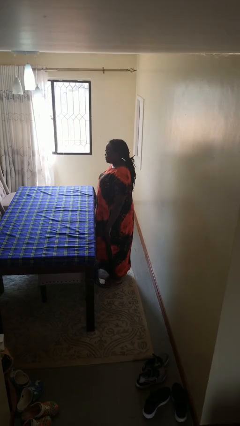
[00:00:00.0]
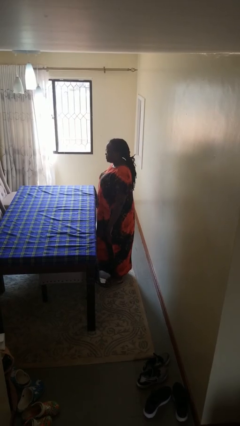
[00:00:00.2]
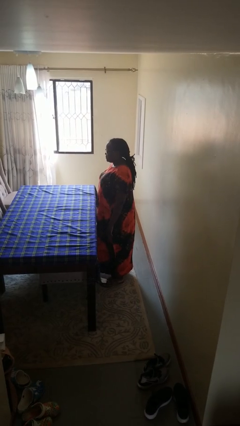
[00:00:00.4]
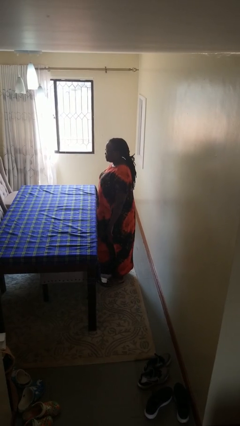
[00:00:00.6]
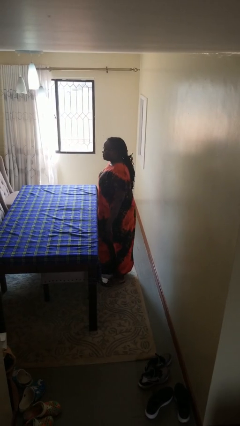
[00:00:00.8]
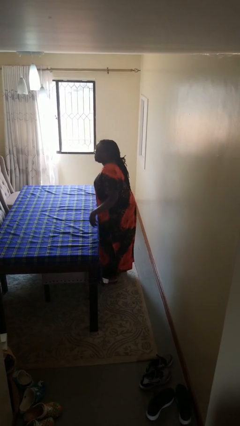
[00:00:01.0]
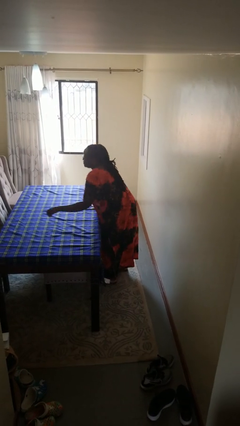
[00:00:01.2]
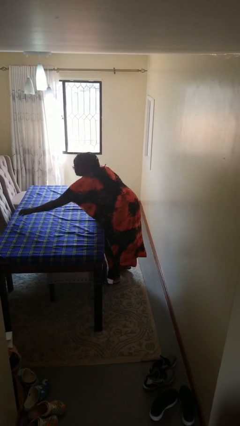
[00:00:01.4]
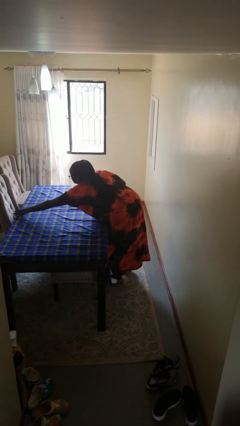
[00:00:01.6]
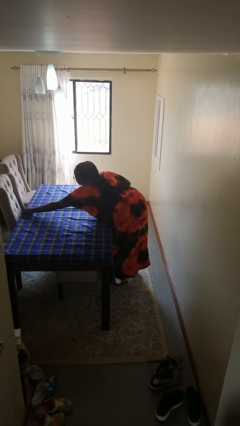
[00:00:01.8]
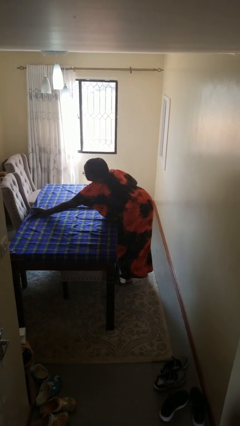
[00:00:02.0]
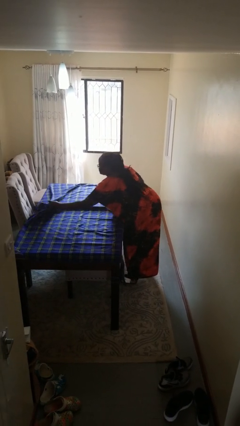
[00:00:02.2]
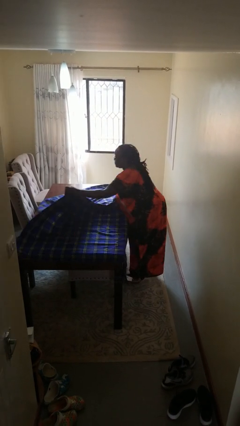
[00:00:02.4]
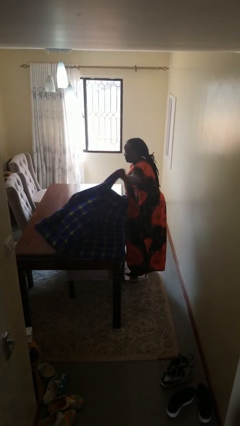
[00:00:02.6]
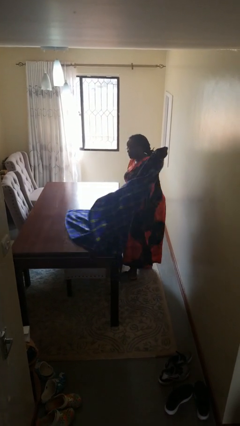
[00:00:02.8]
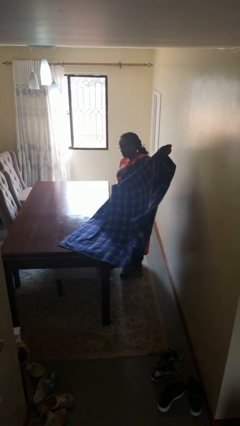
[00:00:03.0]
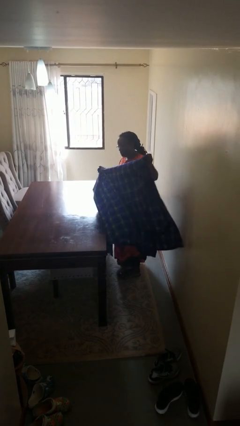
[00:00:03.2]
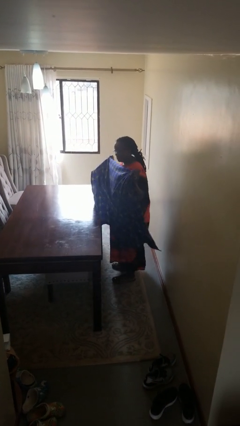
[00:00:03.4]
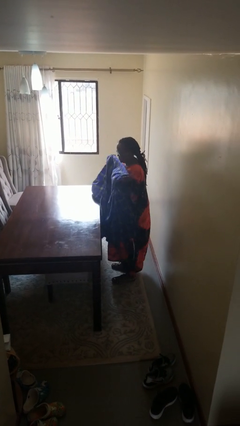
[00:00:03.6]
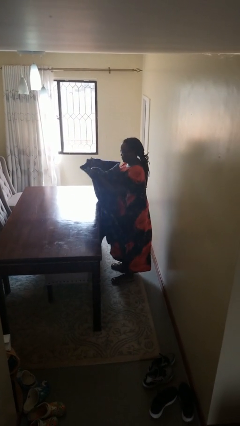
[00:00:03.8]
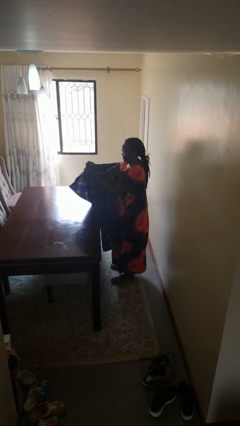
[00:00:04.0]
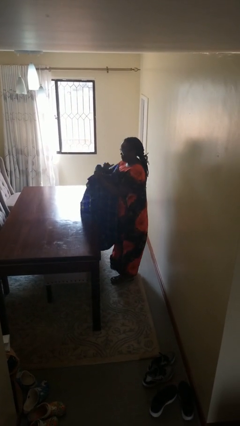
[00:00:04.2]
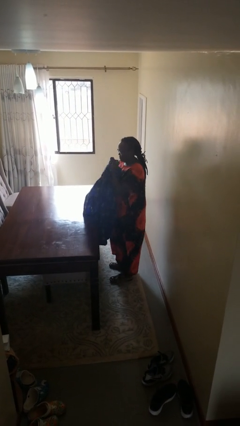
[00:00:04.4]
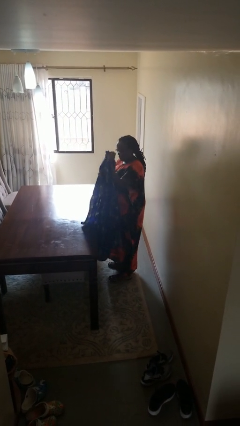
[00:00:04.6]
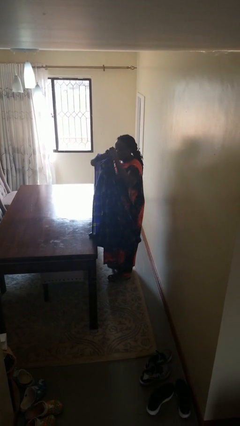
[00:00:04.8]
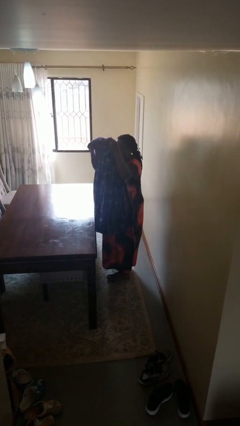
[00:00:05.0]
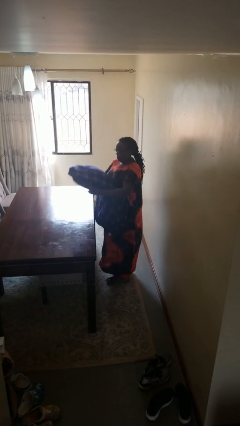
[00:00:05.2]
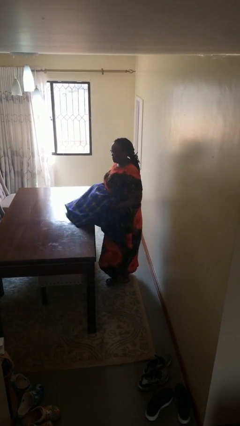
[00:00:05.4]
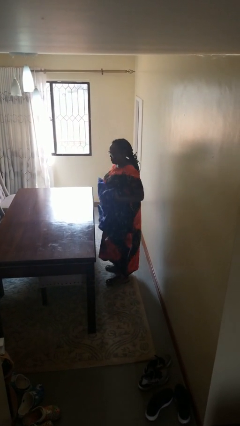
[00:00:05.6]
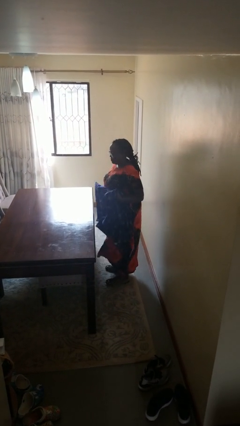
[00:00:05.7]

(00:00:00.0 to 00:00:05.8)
person folds tablecloth

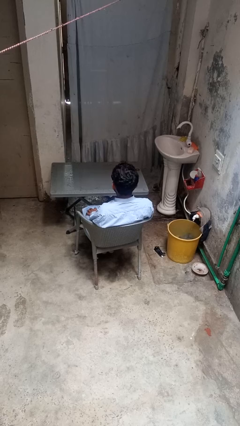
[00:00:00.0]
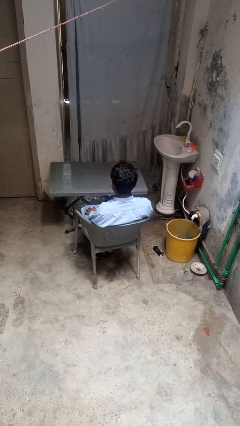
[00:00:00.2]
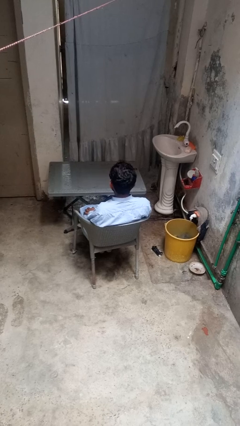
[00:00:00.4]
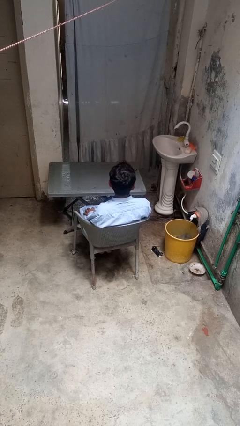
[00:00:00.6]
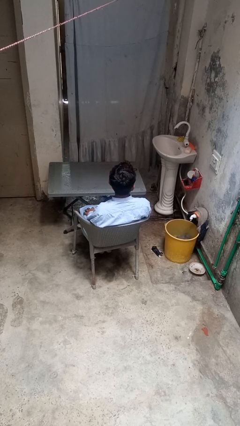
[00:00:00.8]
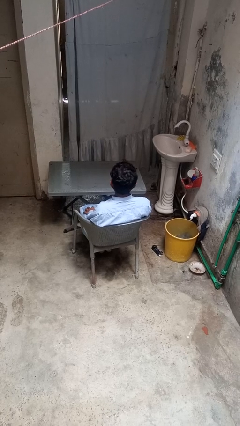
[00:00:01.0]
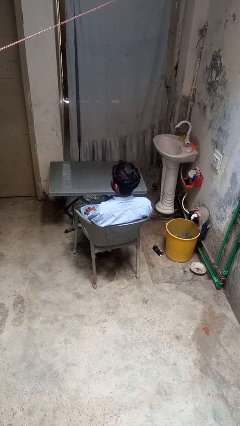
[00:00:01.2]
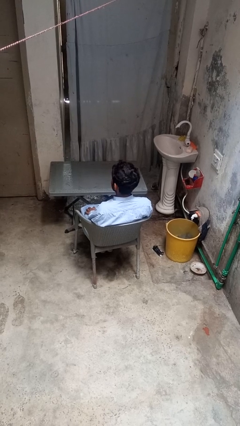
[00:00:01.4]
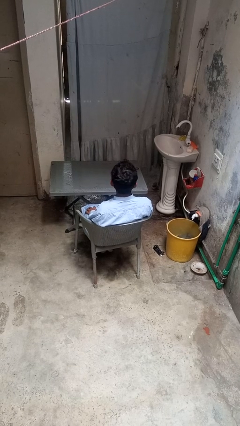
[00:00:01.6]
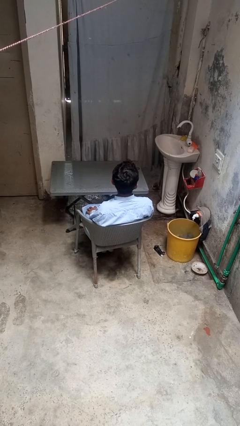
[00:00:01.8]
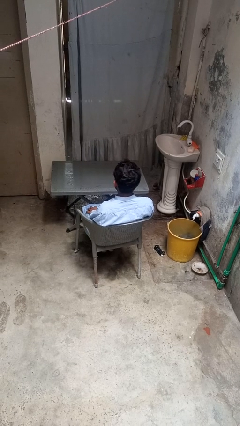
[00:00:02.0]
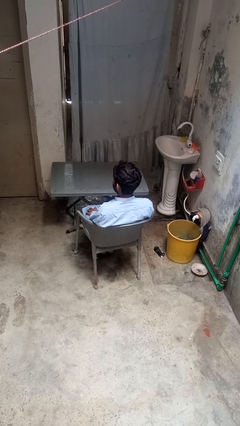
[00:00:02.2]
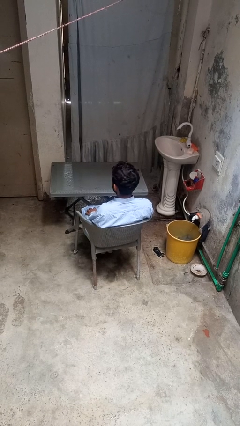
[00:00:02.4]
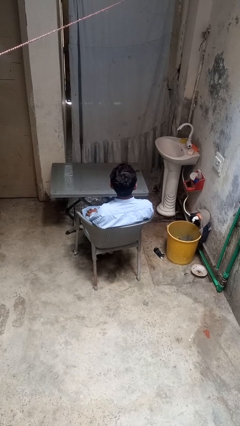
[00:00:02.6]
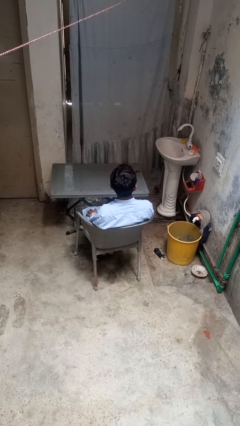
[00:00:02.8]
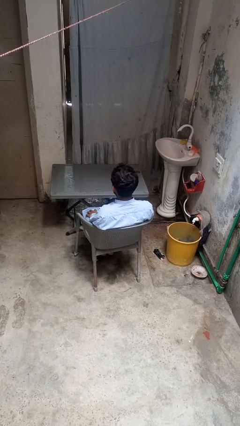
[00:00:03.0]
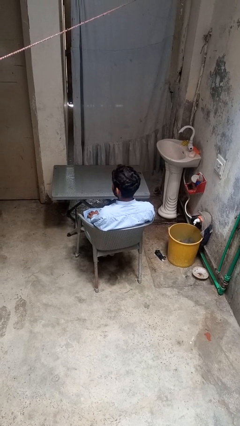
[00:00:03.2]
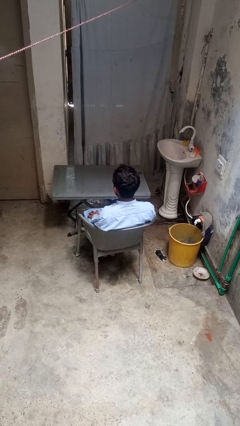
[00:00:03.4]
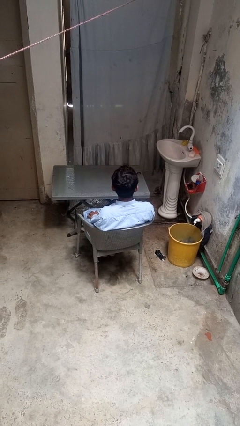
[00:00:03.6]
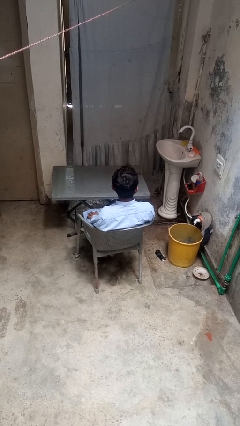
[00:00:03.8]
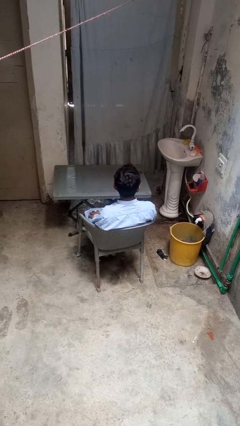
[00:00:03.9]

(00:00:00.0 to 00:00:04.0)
person shakes head

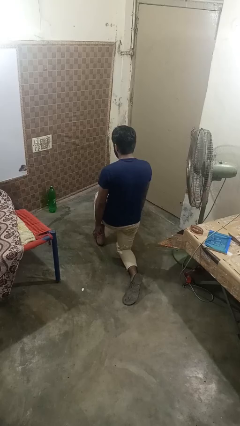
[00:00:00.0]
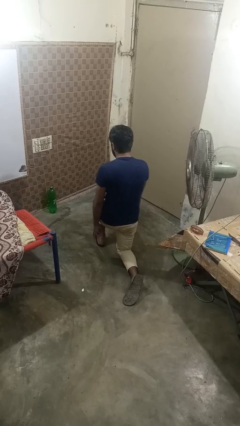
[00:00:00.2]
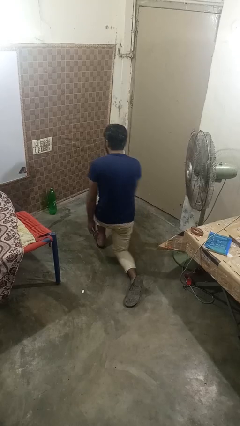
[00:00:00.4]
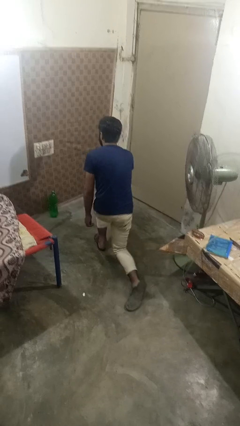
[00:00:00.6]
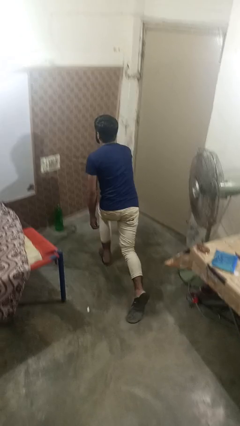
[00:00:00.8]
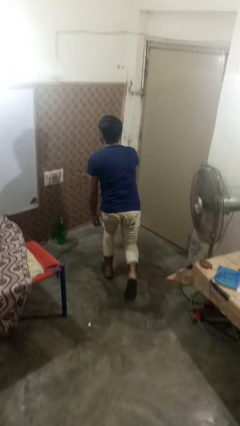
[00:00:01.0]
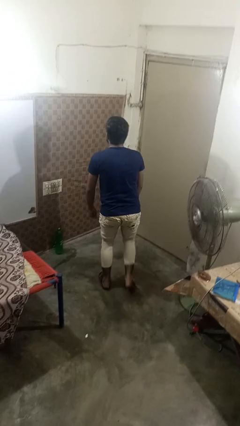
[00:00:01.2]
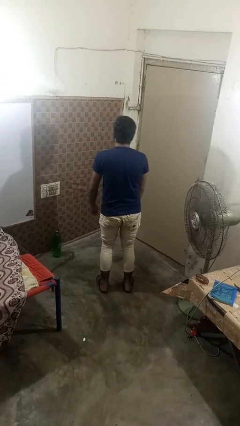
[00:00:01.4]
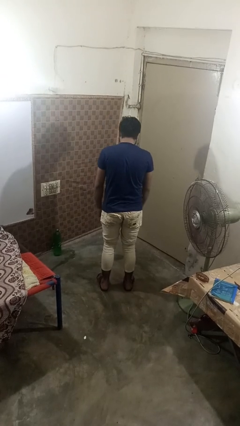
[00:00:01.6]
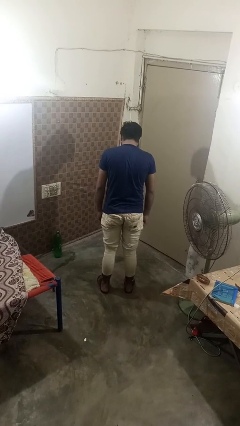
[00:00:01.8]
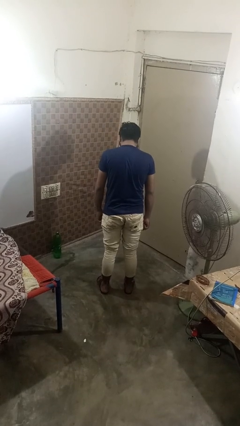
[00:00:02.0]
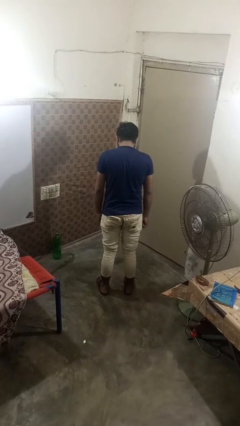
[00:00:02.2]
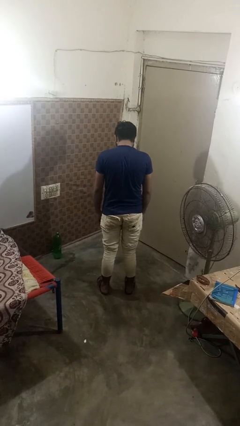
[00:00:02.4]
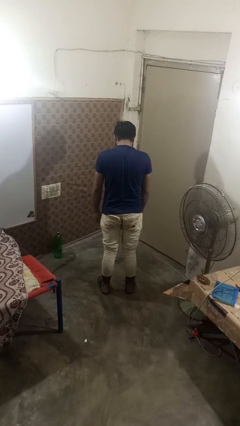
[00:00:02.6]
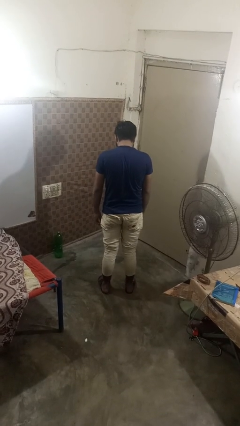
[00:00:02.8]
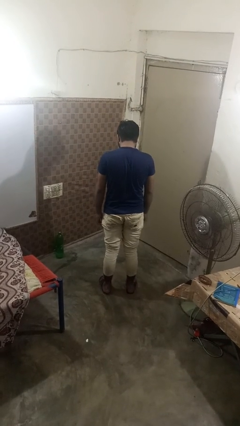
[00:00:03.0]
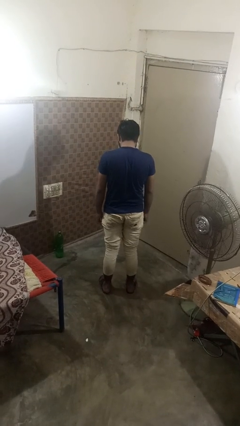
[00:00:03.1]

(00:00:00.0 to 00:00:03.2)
person stands up from floor

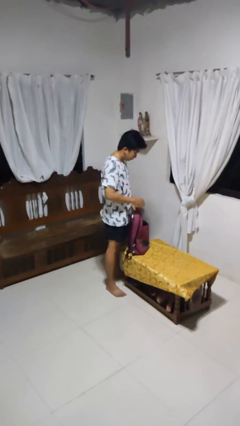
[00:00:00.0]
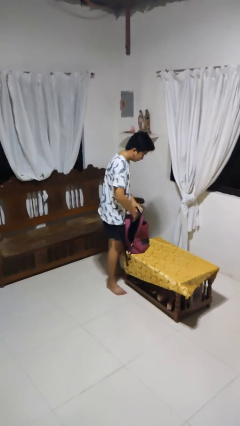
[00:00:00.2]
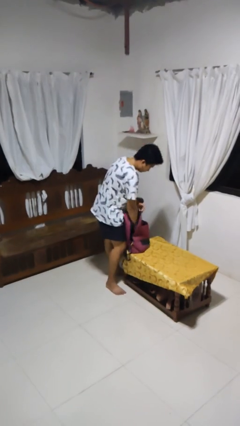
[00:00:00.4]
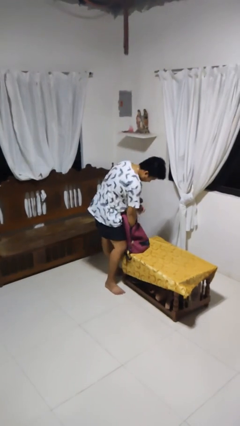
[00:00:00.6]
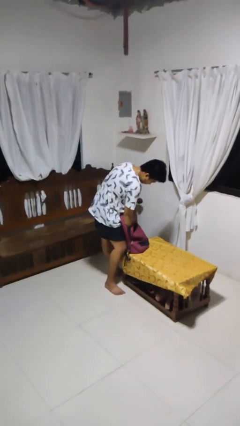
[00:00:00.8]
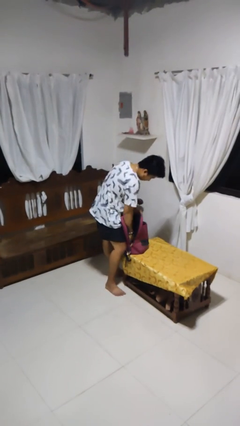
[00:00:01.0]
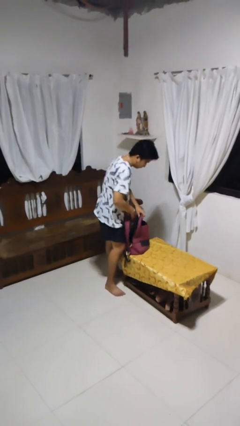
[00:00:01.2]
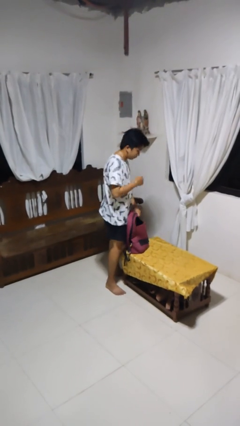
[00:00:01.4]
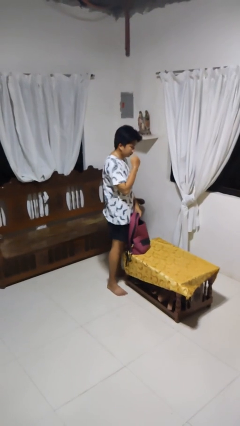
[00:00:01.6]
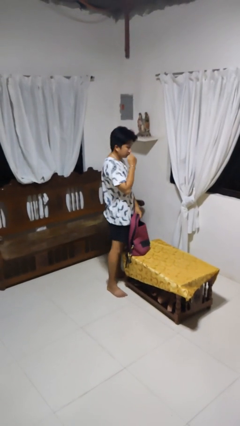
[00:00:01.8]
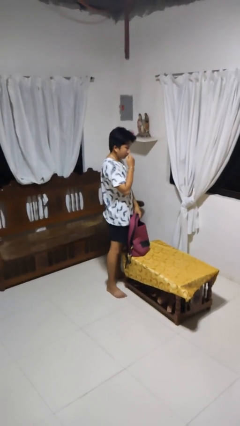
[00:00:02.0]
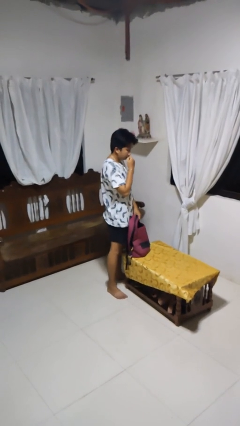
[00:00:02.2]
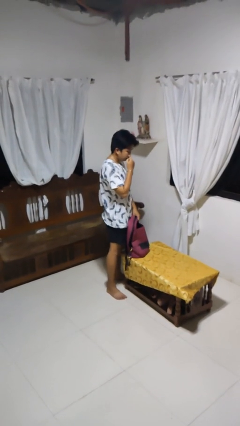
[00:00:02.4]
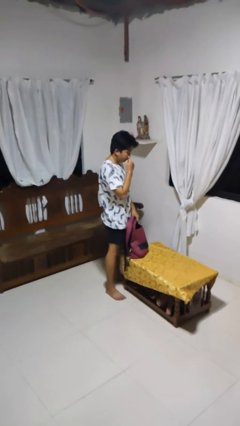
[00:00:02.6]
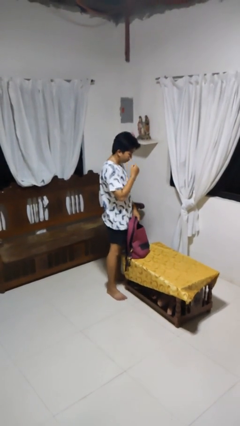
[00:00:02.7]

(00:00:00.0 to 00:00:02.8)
person eats snack from bag

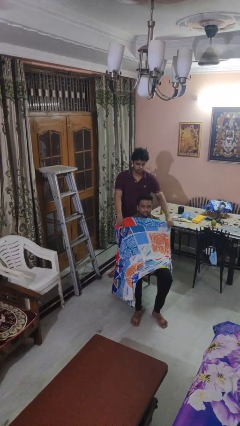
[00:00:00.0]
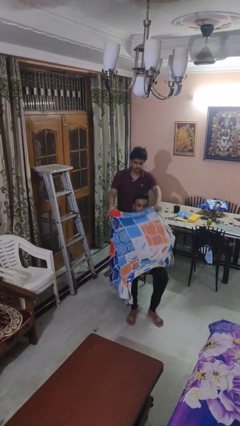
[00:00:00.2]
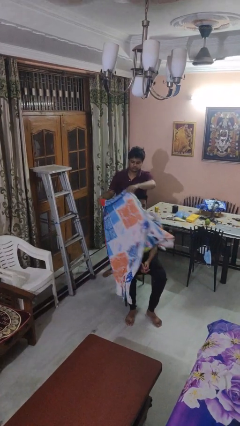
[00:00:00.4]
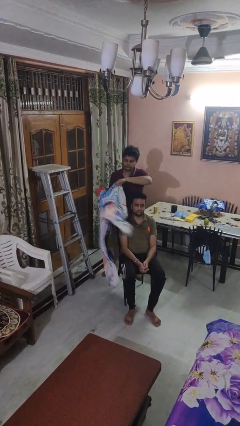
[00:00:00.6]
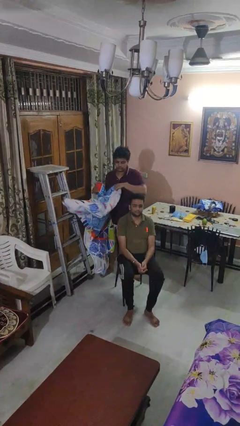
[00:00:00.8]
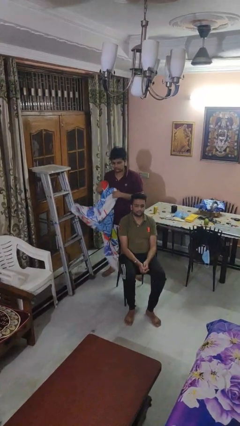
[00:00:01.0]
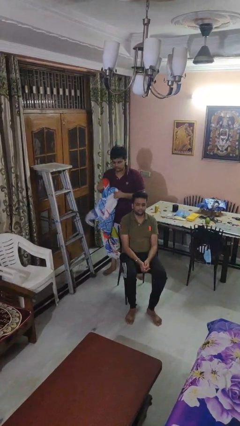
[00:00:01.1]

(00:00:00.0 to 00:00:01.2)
person uncovers friend with blanket
